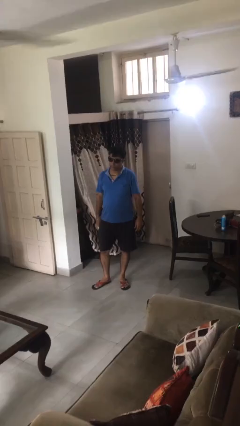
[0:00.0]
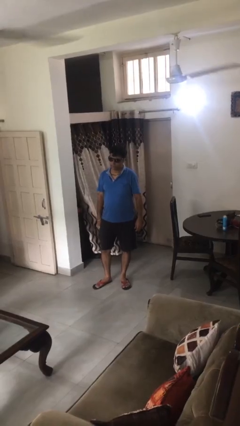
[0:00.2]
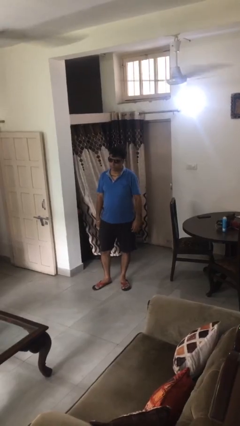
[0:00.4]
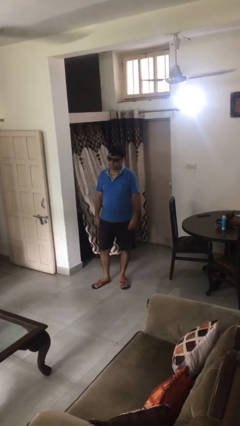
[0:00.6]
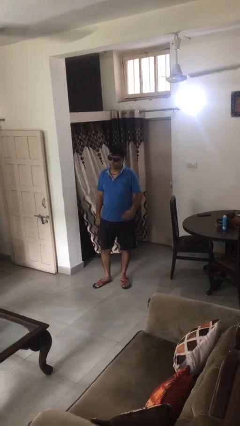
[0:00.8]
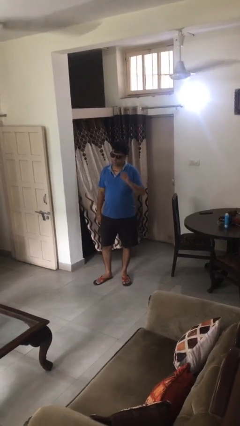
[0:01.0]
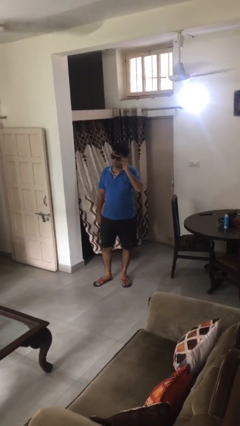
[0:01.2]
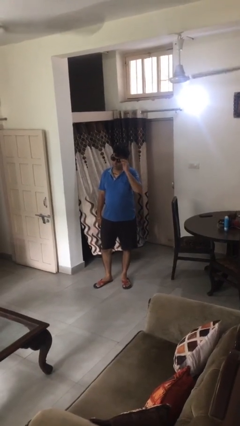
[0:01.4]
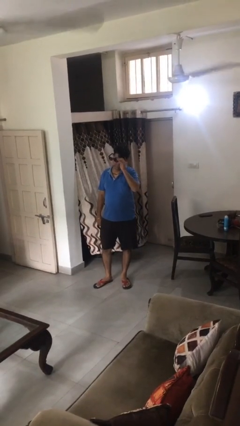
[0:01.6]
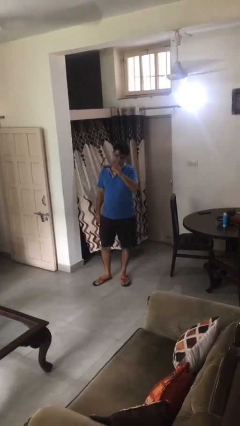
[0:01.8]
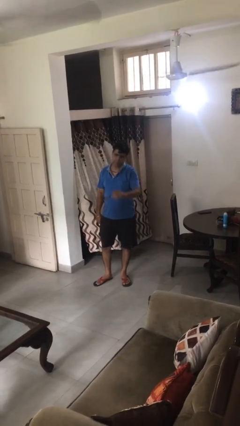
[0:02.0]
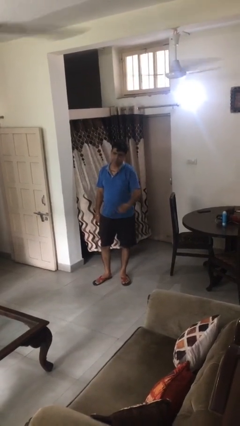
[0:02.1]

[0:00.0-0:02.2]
person takes off sunglasses

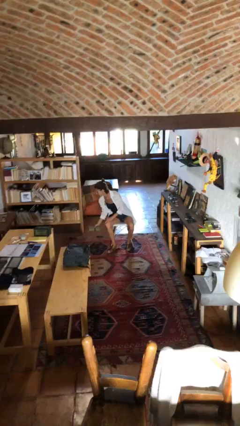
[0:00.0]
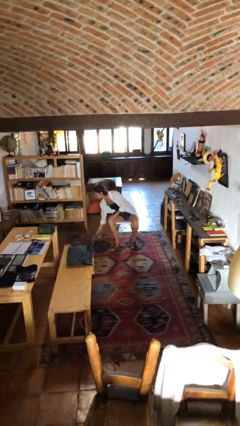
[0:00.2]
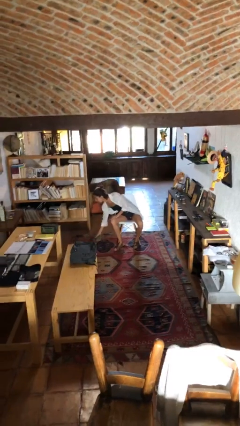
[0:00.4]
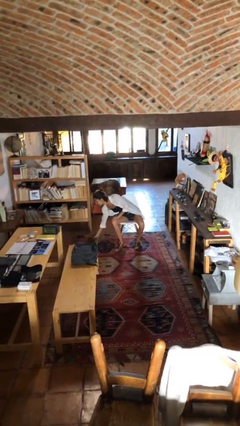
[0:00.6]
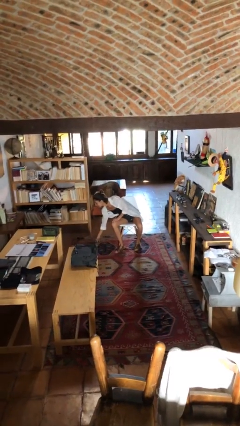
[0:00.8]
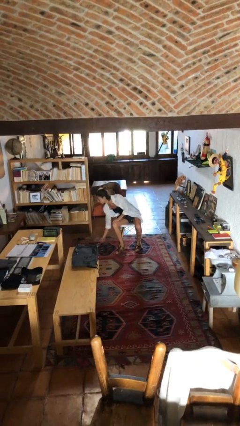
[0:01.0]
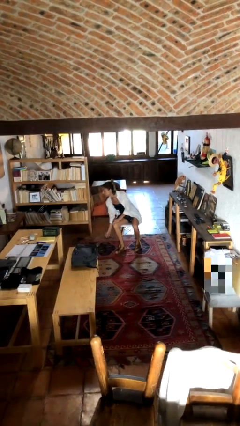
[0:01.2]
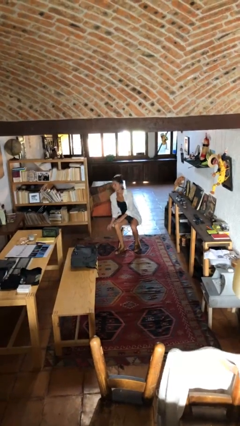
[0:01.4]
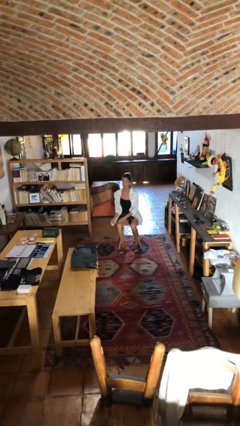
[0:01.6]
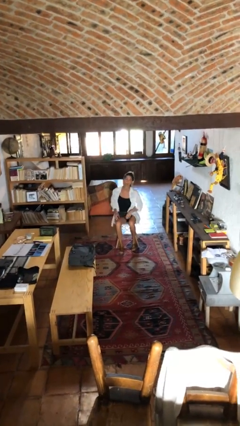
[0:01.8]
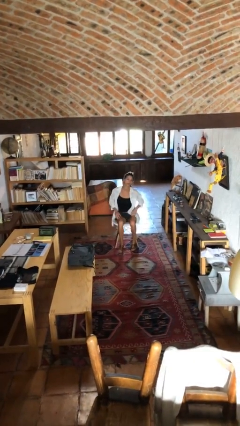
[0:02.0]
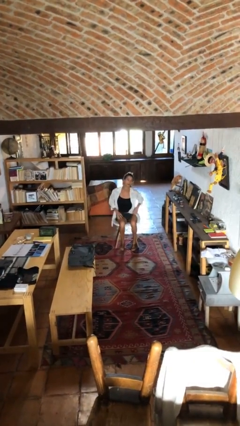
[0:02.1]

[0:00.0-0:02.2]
person puts down object on floor

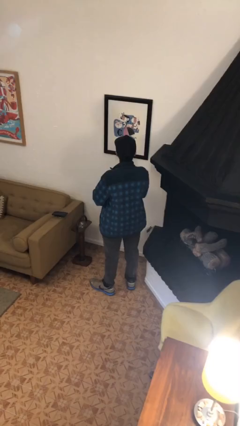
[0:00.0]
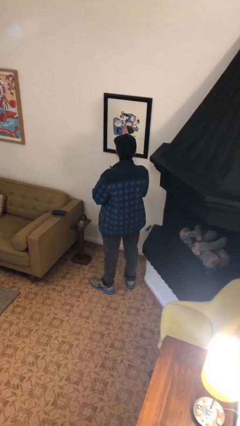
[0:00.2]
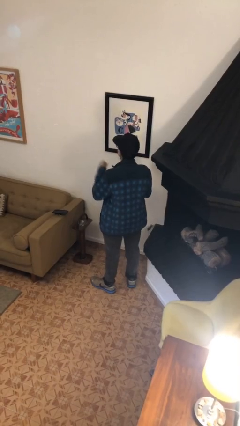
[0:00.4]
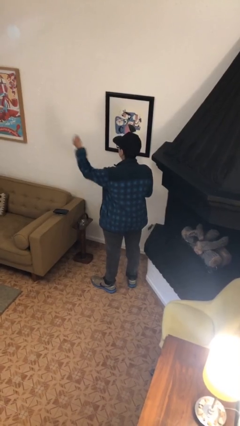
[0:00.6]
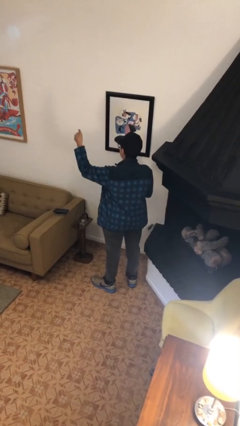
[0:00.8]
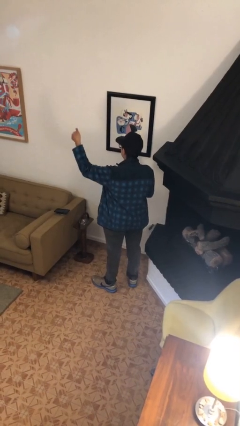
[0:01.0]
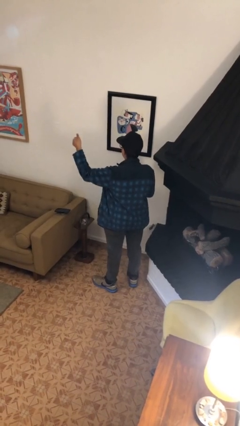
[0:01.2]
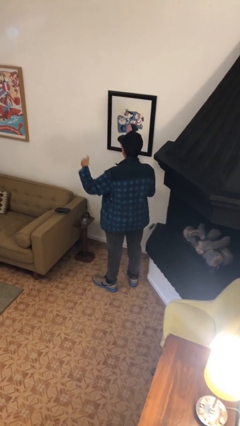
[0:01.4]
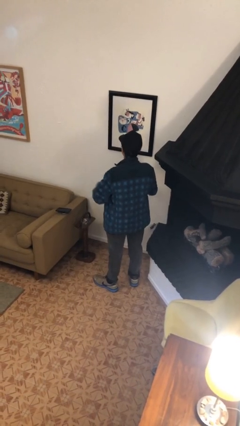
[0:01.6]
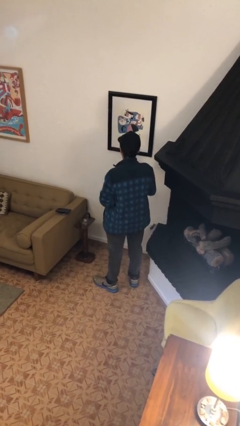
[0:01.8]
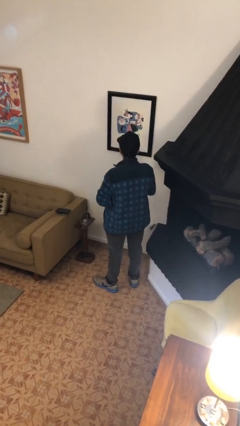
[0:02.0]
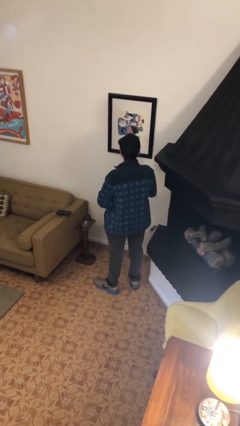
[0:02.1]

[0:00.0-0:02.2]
person gestures thumbs up

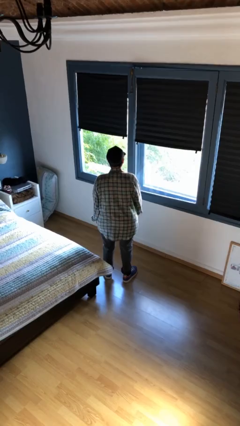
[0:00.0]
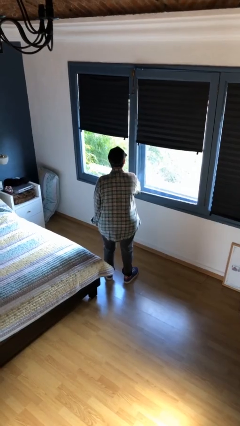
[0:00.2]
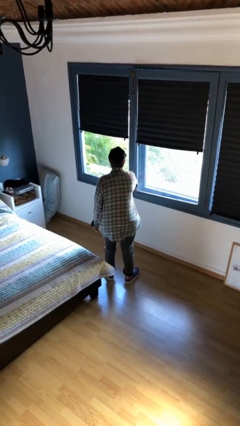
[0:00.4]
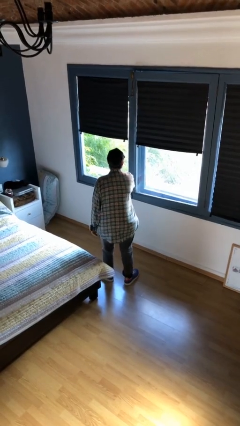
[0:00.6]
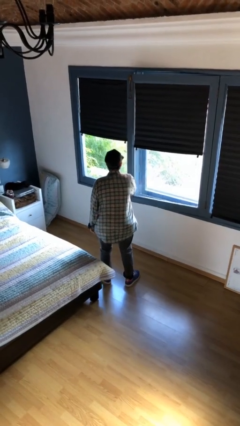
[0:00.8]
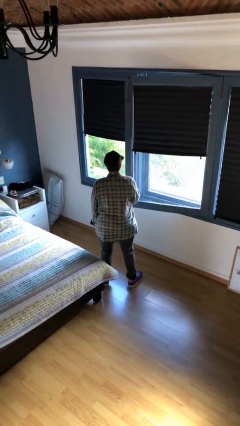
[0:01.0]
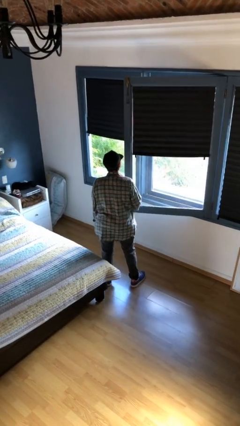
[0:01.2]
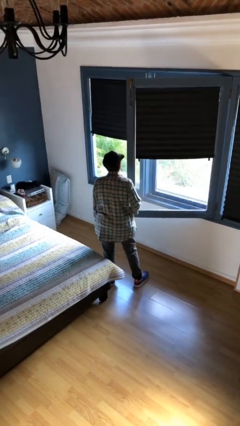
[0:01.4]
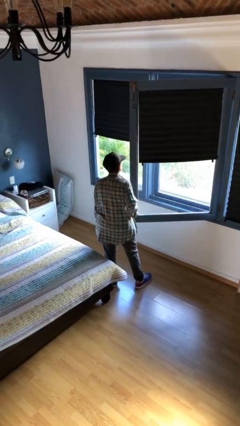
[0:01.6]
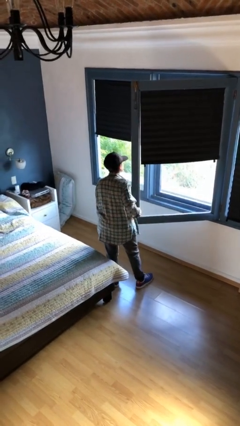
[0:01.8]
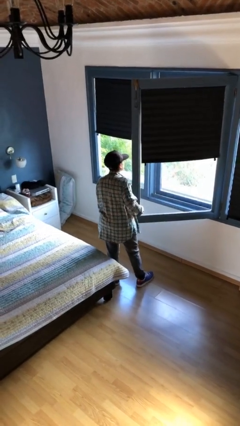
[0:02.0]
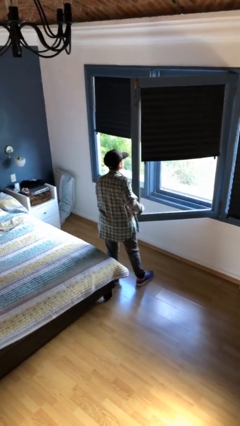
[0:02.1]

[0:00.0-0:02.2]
person opens home window

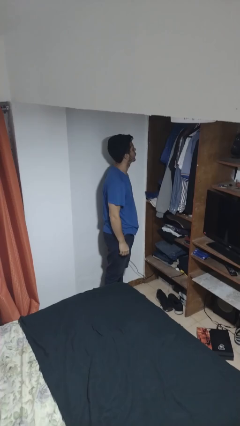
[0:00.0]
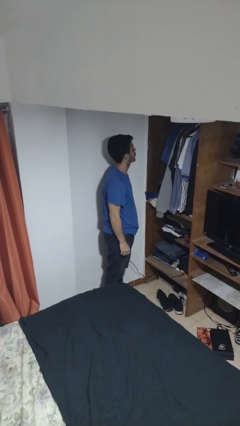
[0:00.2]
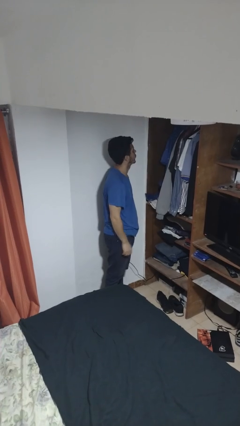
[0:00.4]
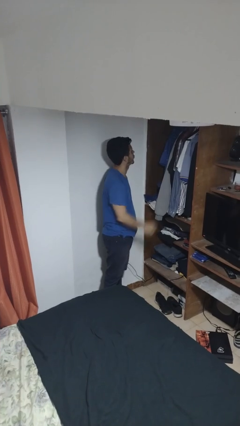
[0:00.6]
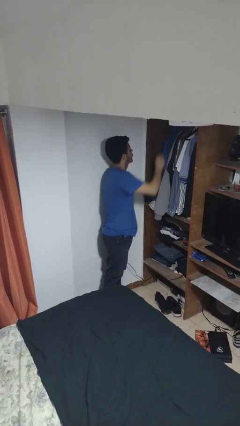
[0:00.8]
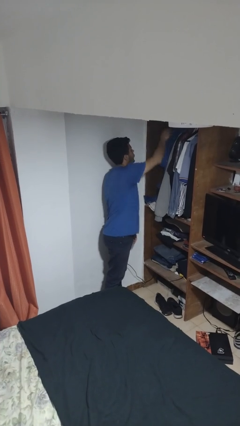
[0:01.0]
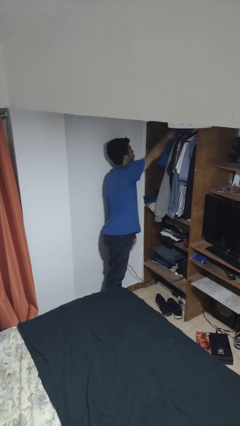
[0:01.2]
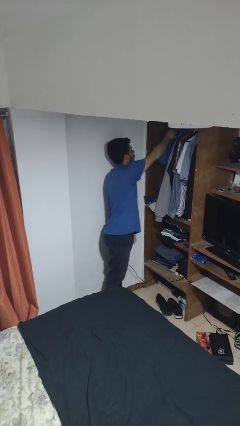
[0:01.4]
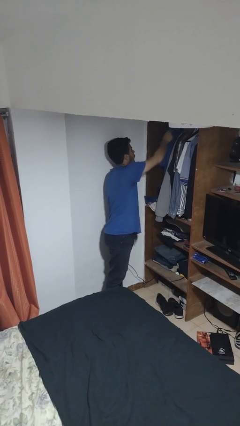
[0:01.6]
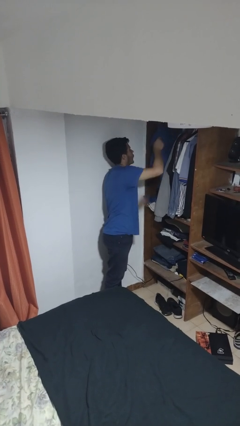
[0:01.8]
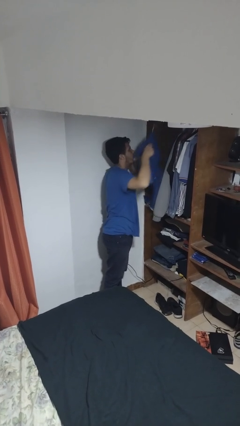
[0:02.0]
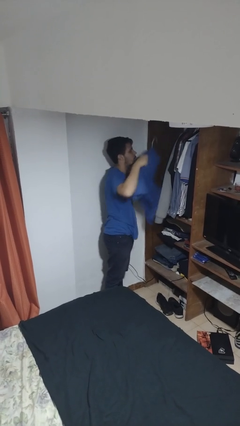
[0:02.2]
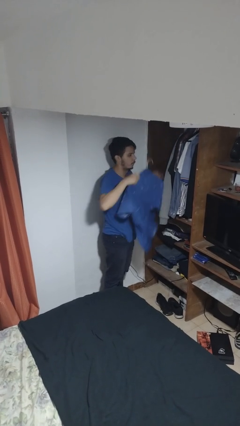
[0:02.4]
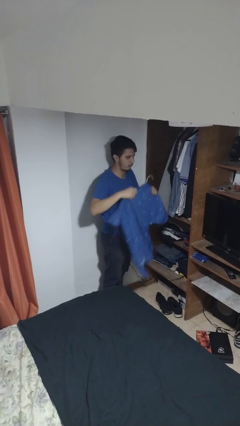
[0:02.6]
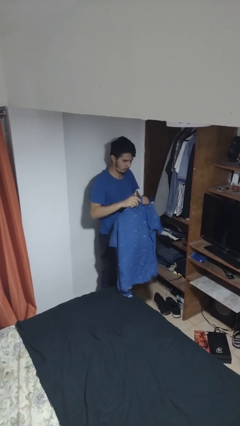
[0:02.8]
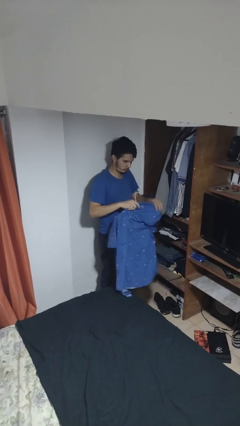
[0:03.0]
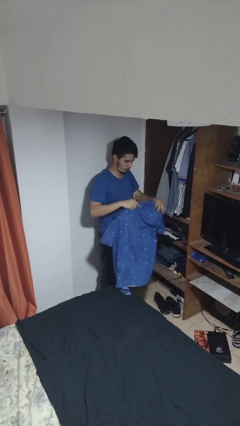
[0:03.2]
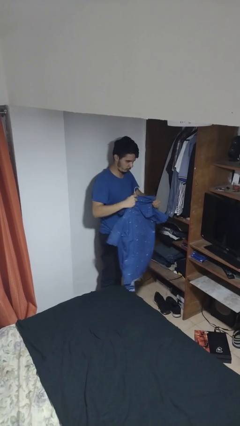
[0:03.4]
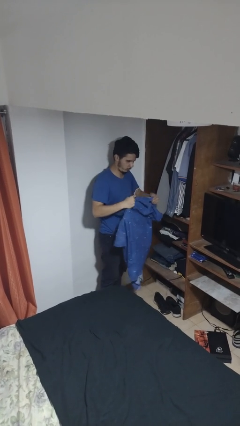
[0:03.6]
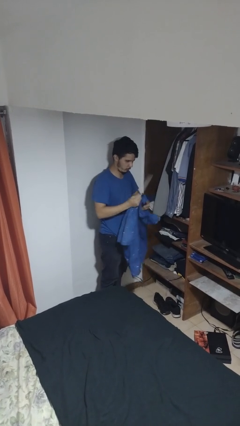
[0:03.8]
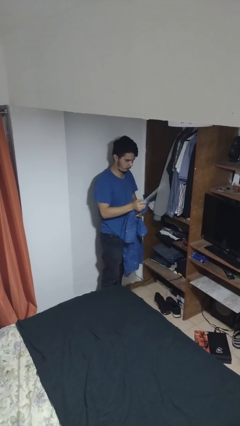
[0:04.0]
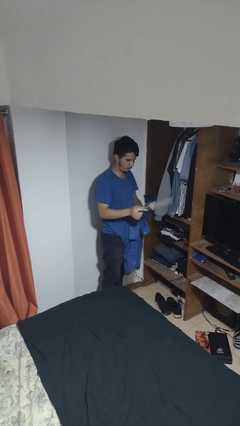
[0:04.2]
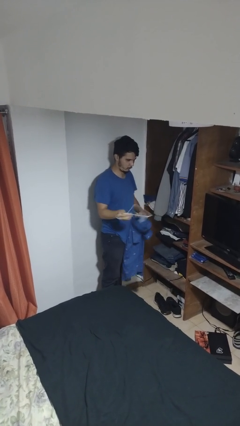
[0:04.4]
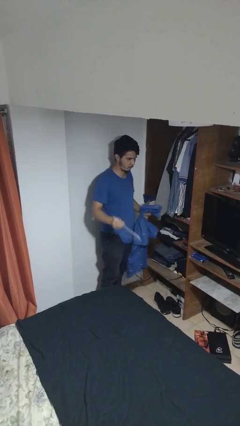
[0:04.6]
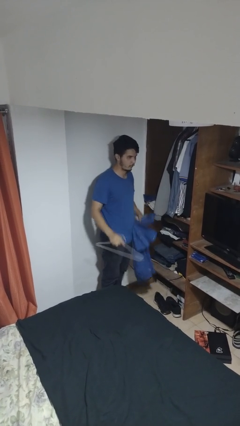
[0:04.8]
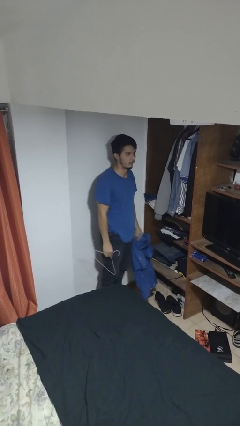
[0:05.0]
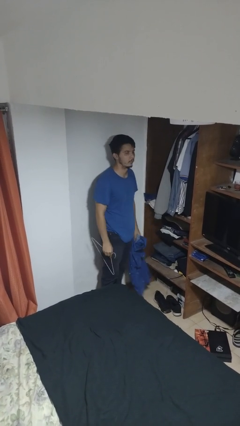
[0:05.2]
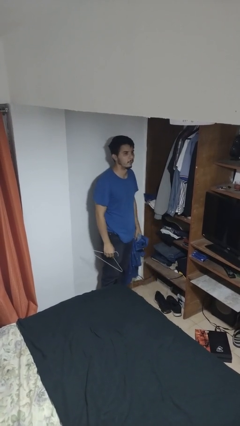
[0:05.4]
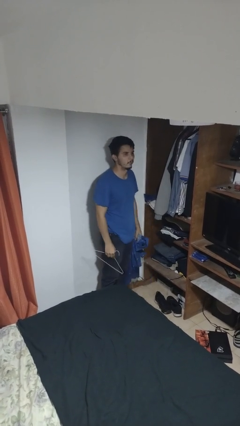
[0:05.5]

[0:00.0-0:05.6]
person takes clothes from closet

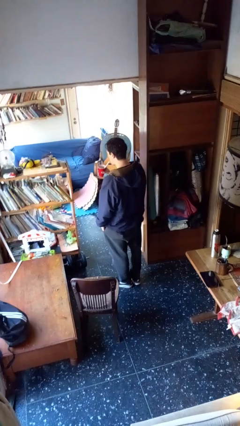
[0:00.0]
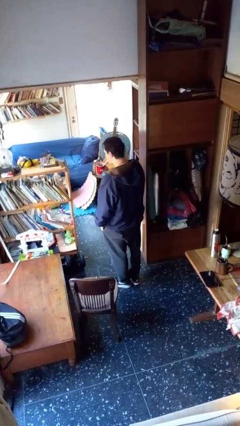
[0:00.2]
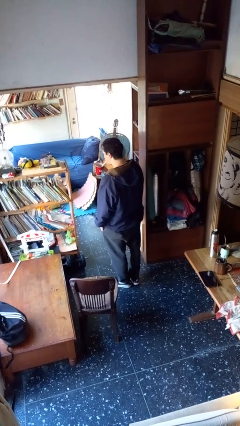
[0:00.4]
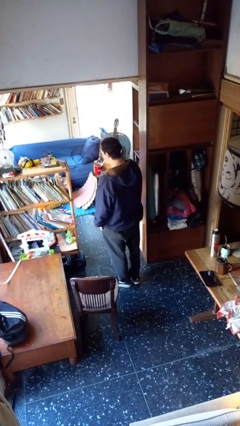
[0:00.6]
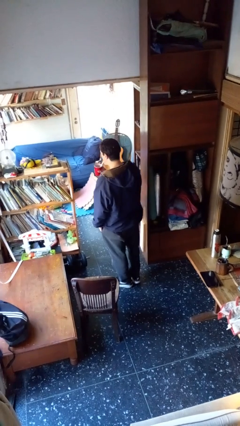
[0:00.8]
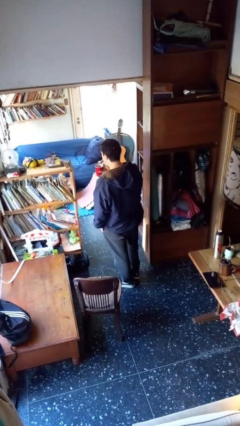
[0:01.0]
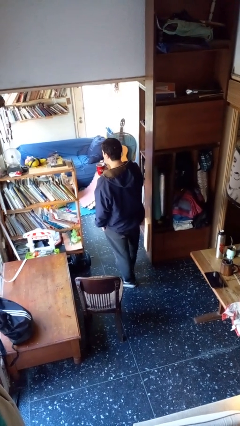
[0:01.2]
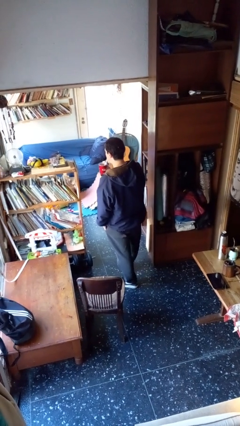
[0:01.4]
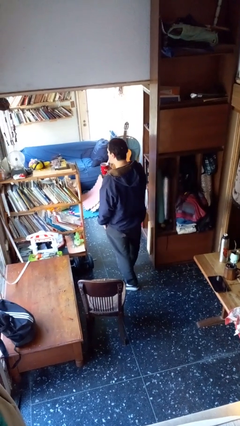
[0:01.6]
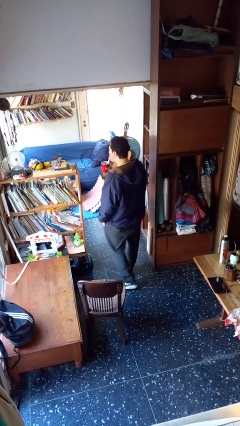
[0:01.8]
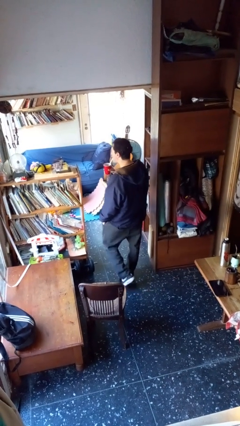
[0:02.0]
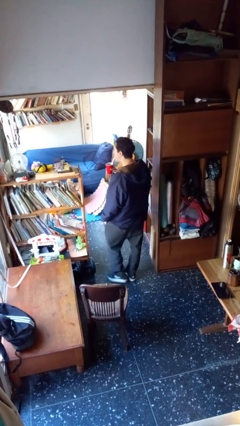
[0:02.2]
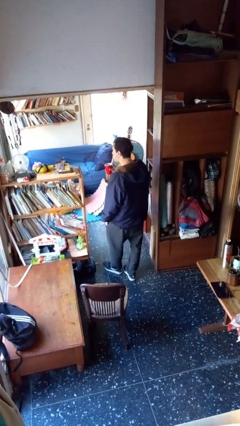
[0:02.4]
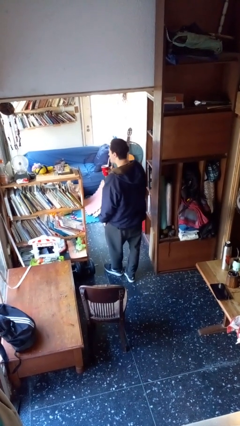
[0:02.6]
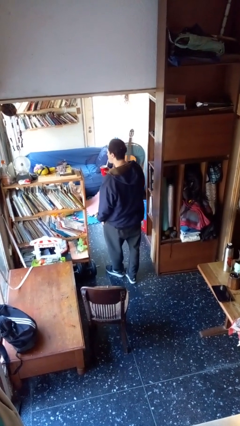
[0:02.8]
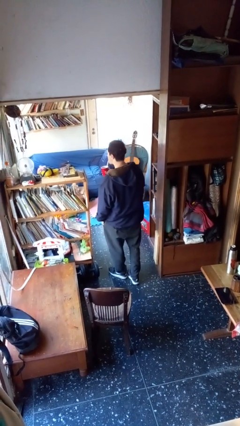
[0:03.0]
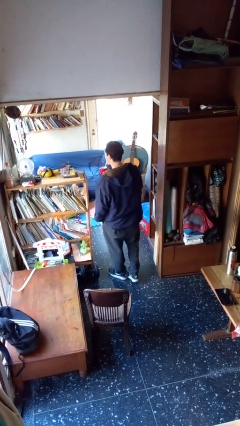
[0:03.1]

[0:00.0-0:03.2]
person drinks from straw
